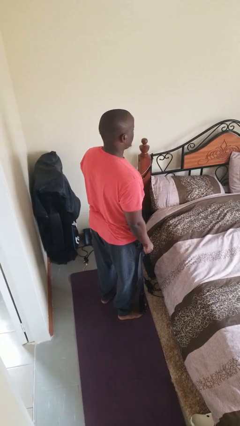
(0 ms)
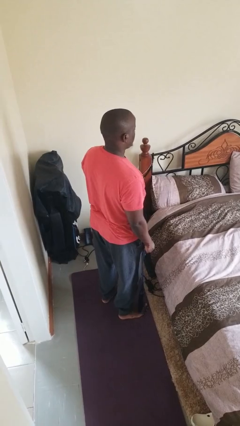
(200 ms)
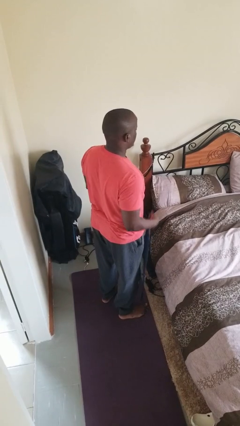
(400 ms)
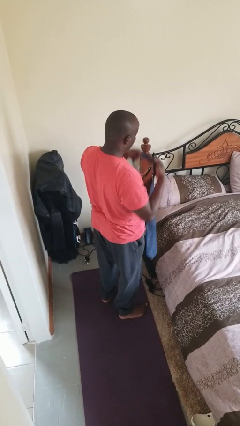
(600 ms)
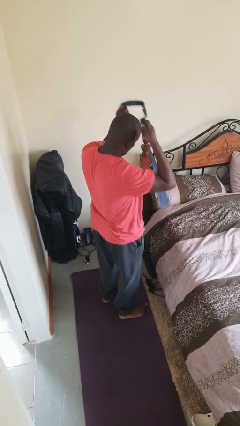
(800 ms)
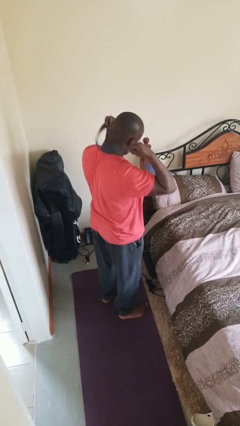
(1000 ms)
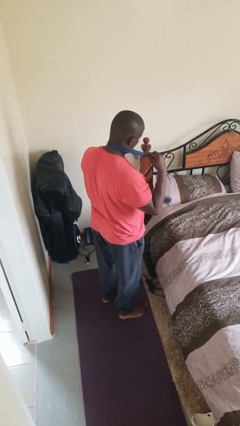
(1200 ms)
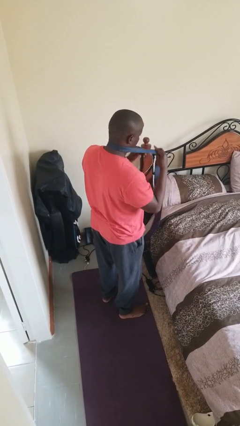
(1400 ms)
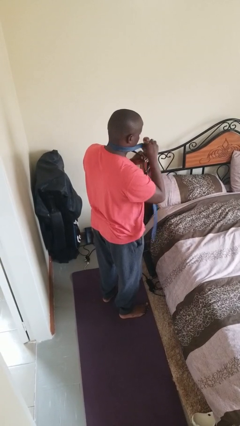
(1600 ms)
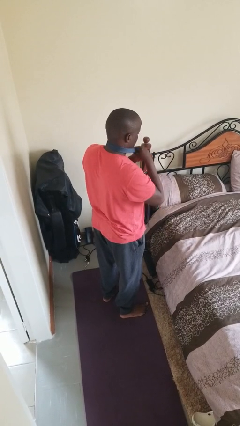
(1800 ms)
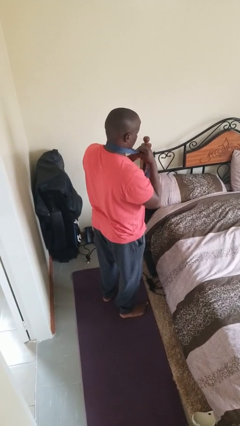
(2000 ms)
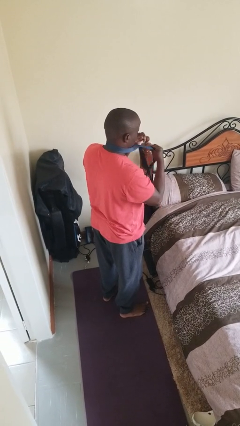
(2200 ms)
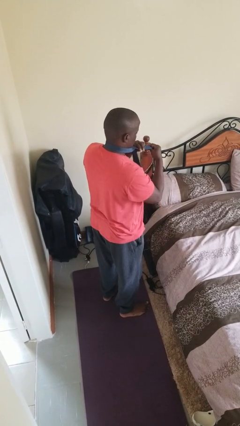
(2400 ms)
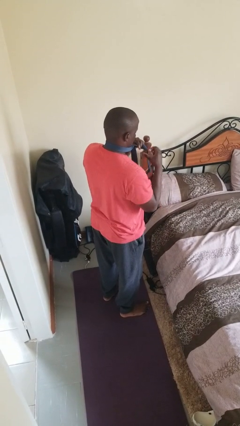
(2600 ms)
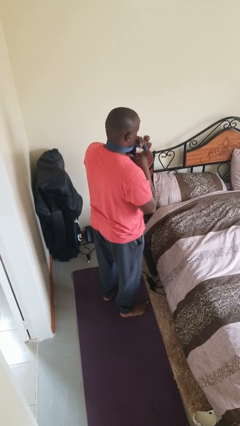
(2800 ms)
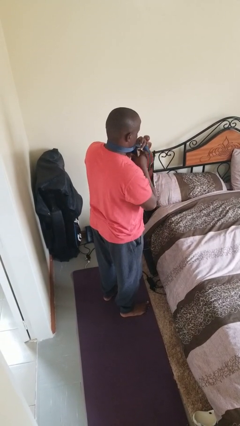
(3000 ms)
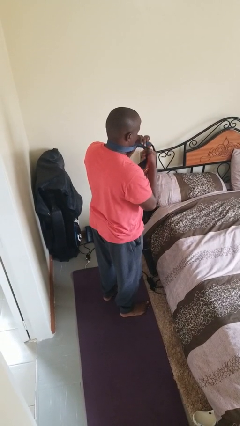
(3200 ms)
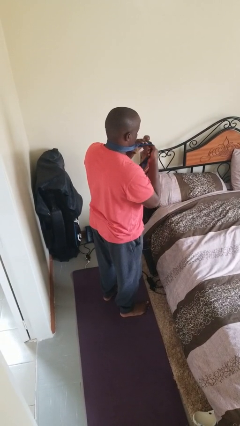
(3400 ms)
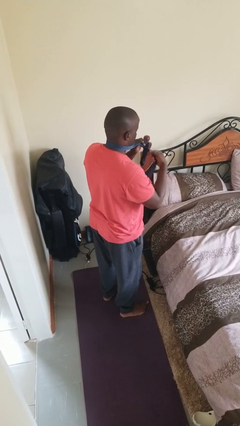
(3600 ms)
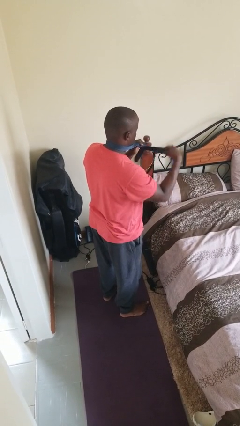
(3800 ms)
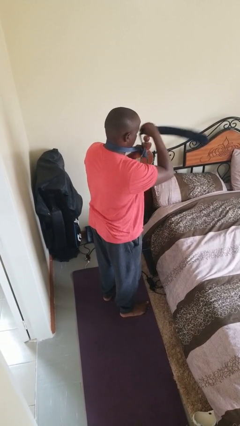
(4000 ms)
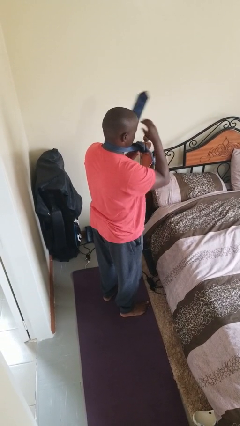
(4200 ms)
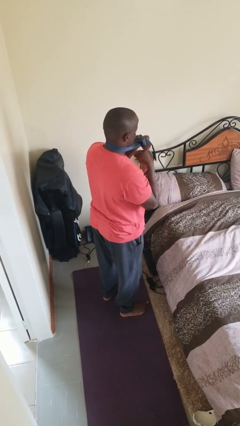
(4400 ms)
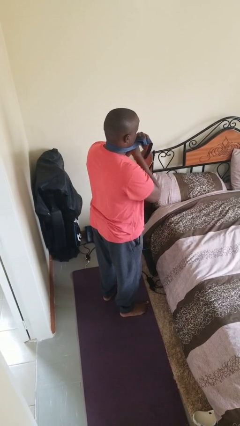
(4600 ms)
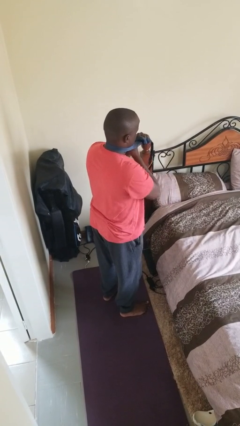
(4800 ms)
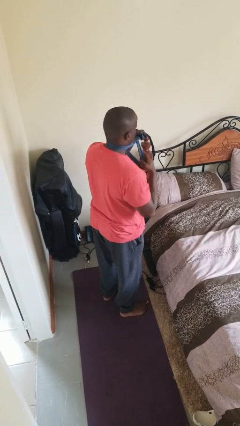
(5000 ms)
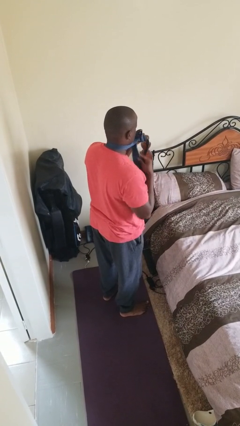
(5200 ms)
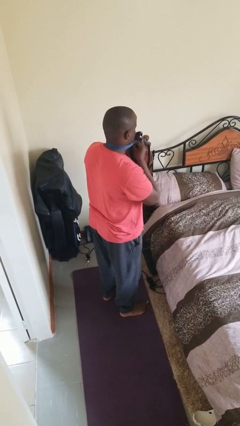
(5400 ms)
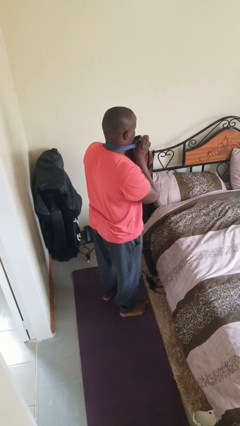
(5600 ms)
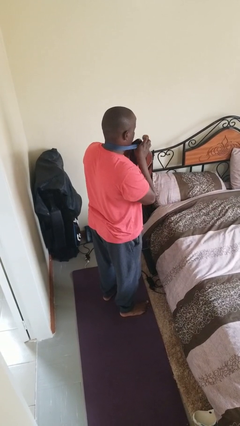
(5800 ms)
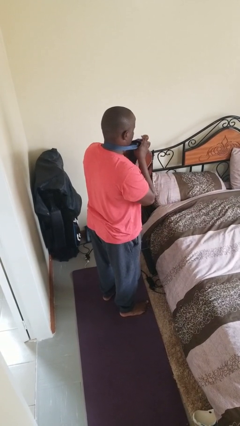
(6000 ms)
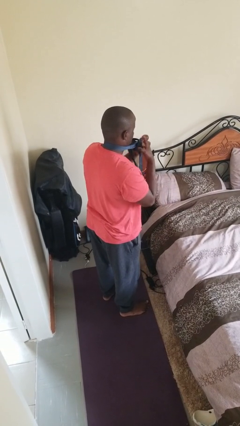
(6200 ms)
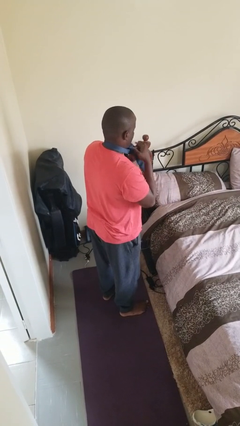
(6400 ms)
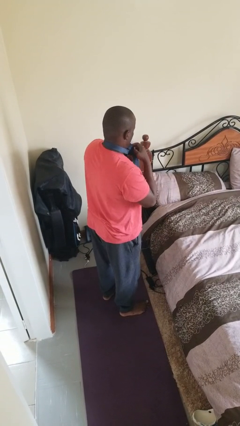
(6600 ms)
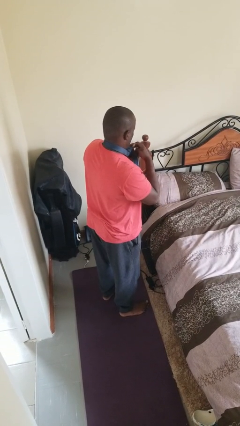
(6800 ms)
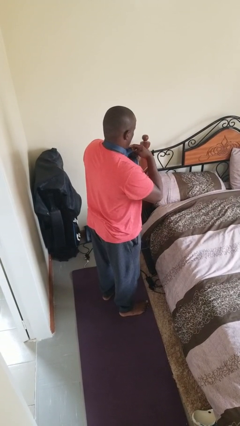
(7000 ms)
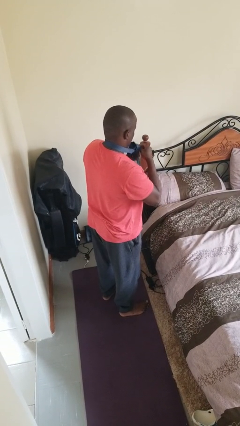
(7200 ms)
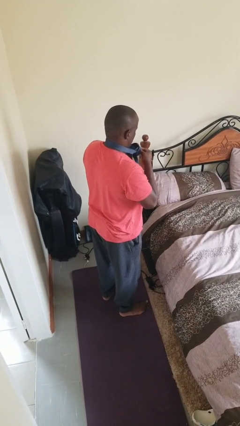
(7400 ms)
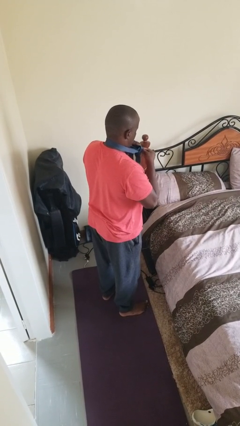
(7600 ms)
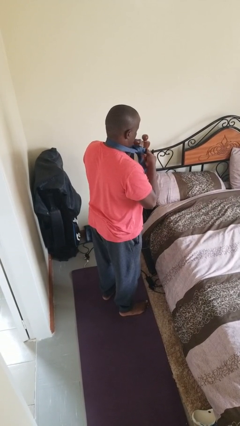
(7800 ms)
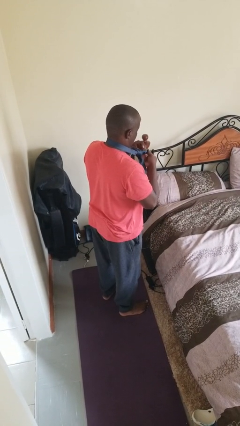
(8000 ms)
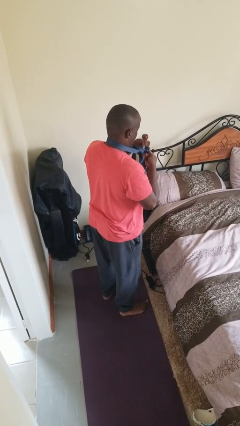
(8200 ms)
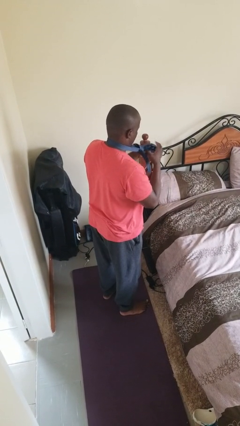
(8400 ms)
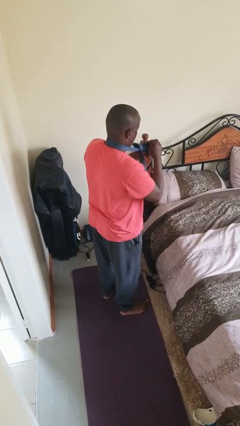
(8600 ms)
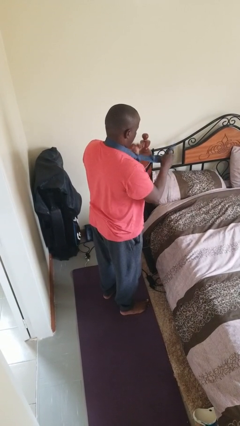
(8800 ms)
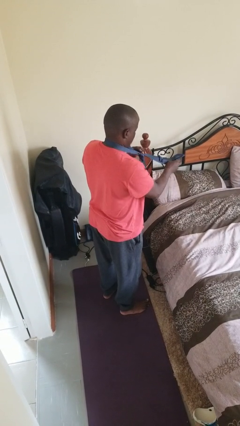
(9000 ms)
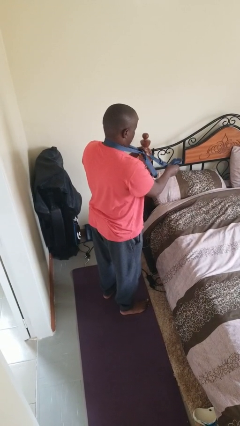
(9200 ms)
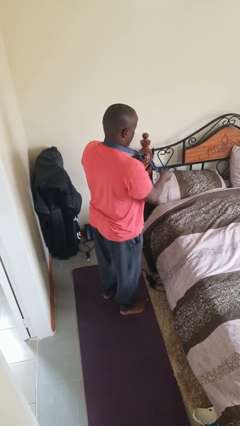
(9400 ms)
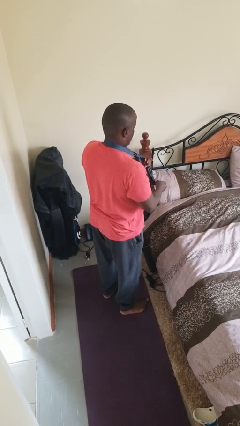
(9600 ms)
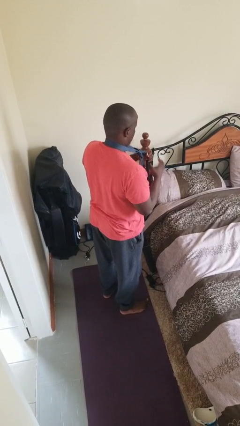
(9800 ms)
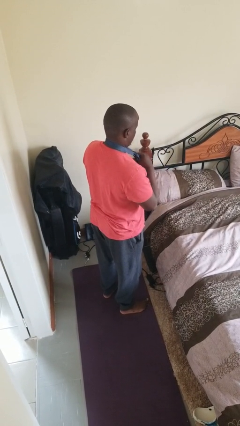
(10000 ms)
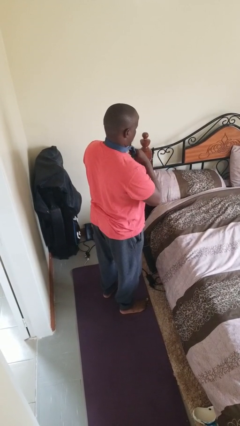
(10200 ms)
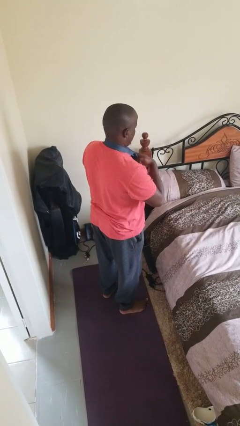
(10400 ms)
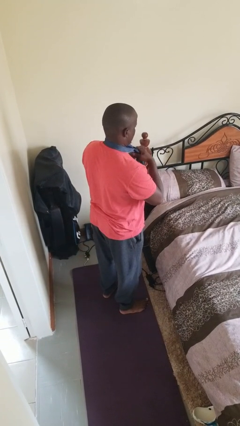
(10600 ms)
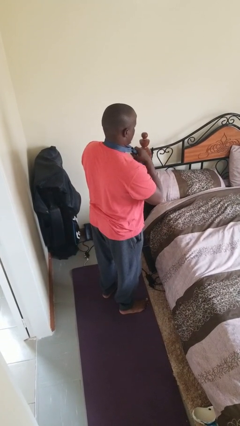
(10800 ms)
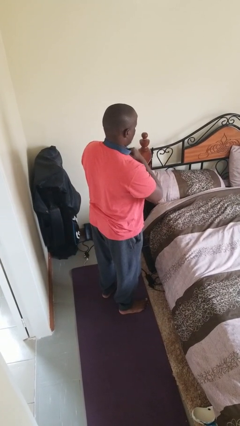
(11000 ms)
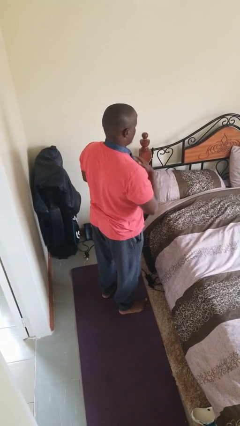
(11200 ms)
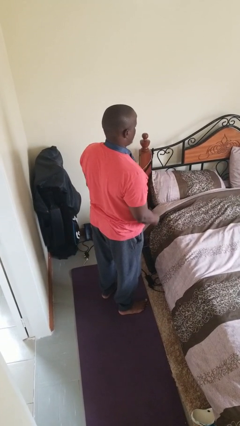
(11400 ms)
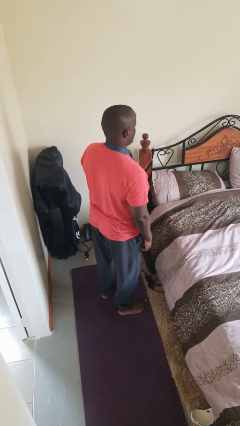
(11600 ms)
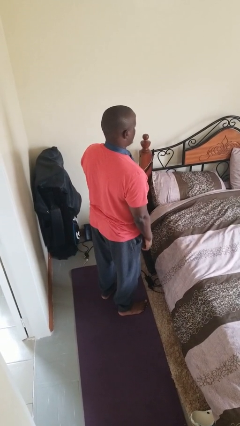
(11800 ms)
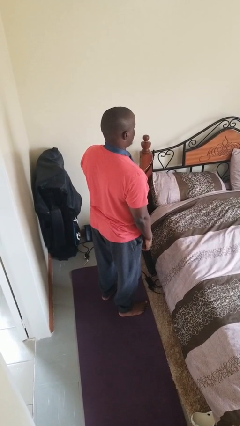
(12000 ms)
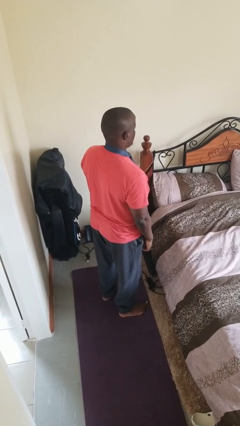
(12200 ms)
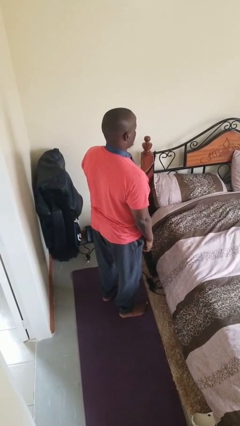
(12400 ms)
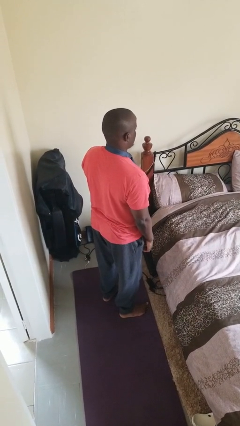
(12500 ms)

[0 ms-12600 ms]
person puts on necktie

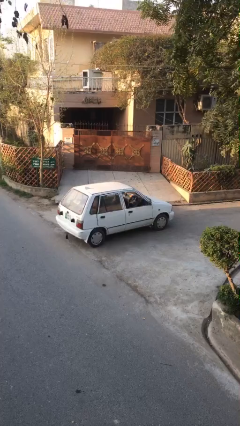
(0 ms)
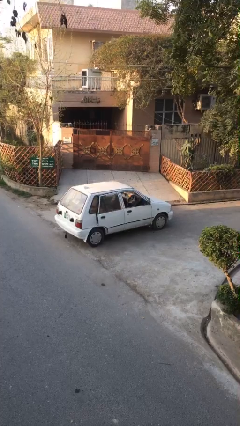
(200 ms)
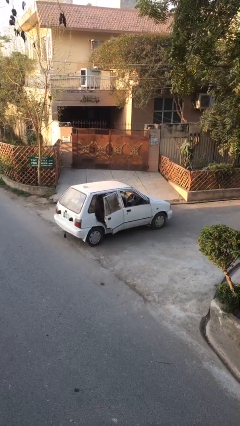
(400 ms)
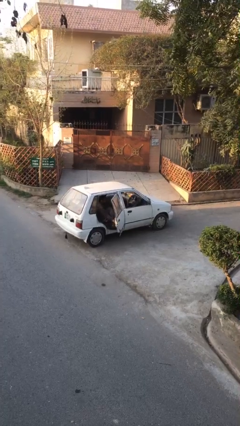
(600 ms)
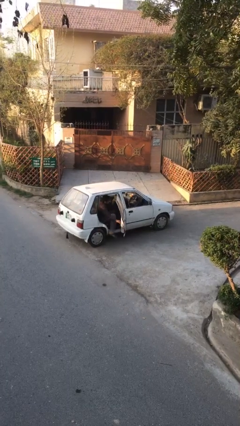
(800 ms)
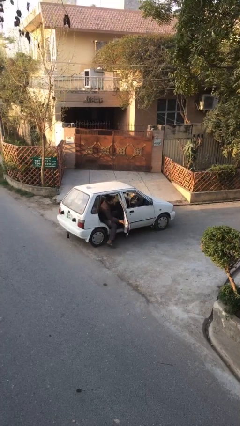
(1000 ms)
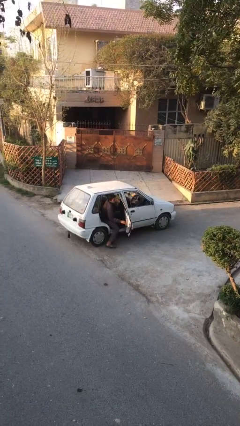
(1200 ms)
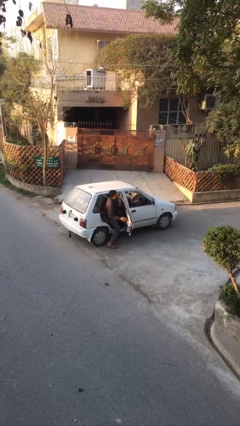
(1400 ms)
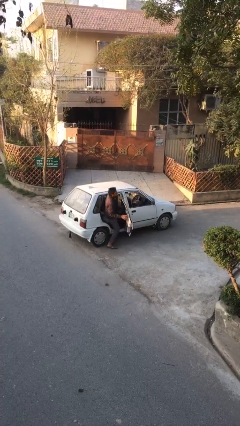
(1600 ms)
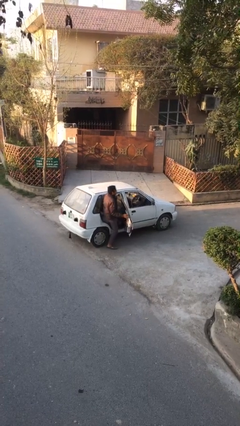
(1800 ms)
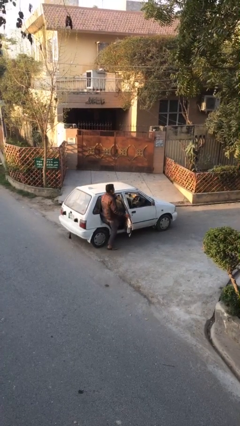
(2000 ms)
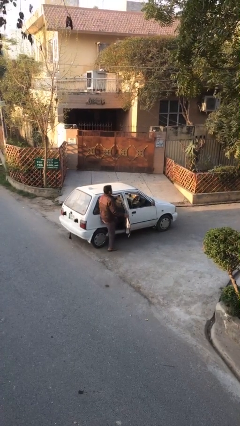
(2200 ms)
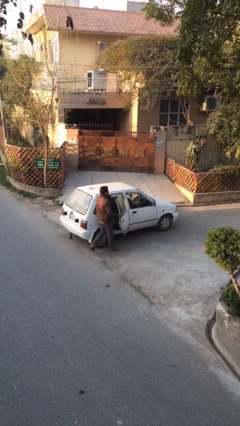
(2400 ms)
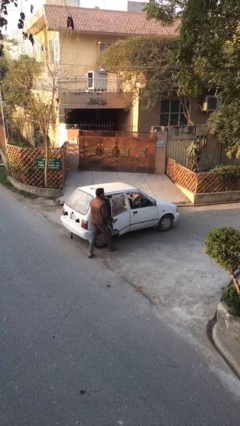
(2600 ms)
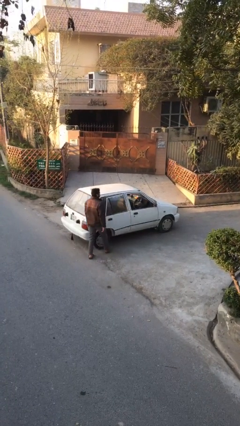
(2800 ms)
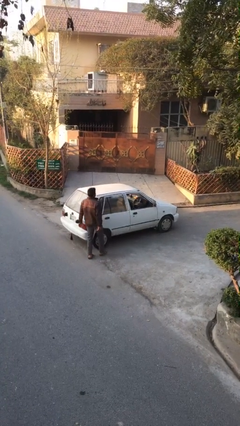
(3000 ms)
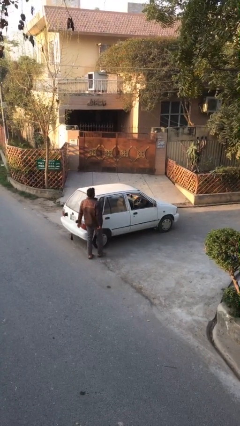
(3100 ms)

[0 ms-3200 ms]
car drops off person

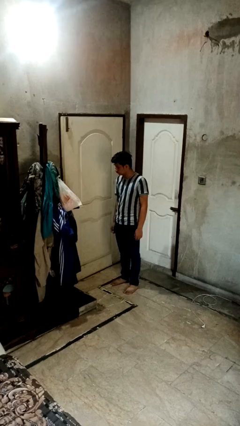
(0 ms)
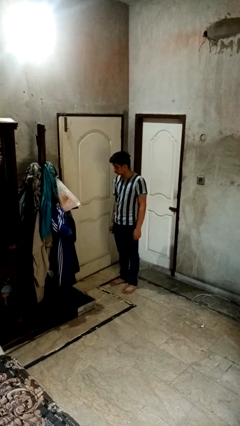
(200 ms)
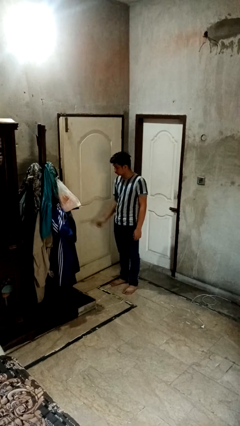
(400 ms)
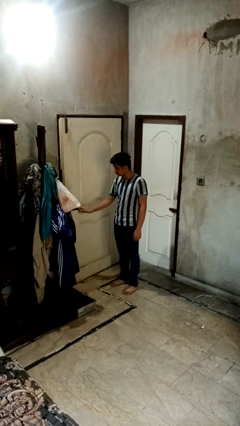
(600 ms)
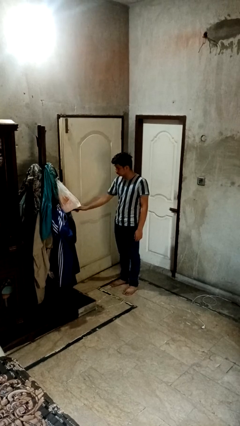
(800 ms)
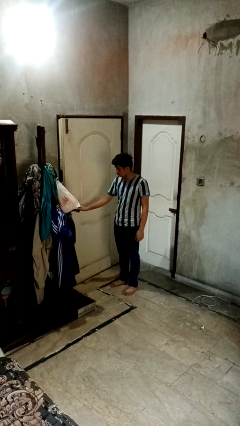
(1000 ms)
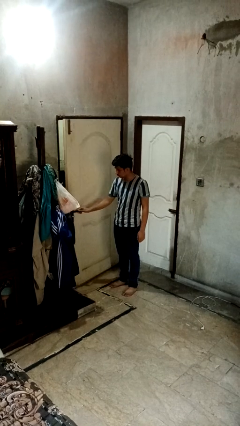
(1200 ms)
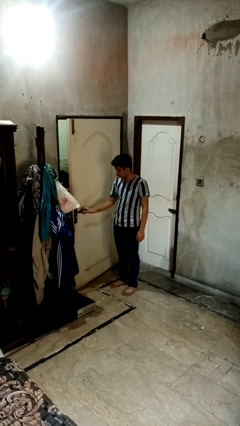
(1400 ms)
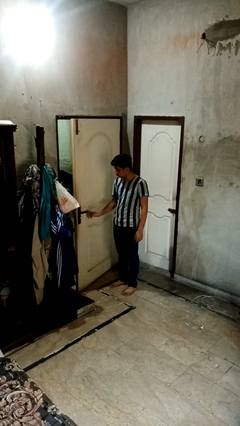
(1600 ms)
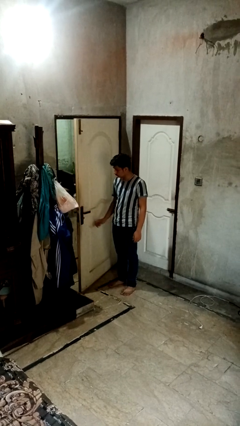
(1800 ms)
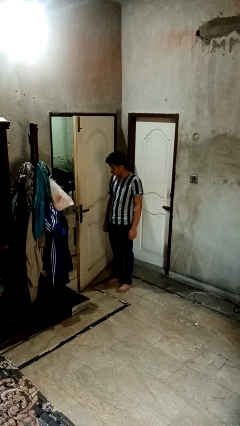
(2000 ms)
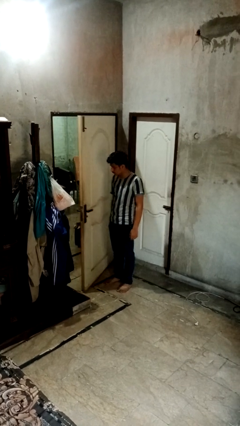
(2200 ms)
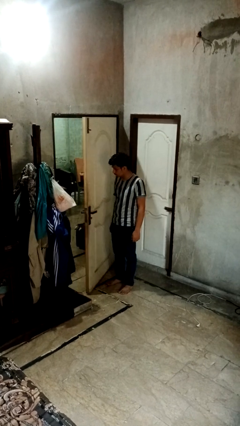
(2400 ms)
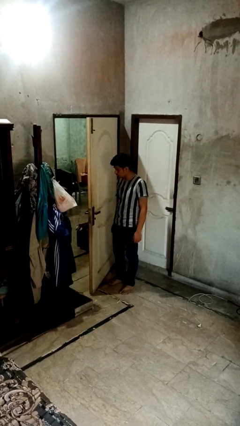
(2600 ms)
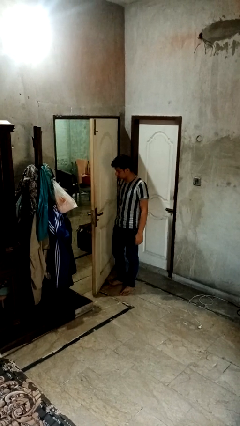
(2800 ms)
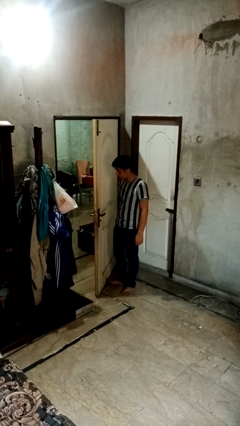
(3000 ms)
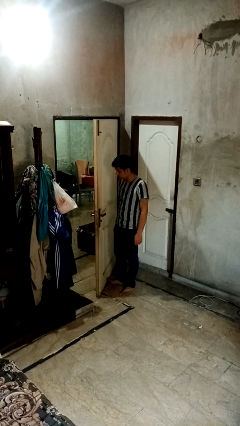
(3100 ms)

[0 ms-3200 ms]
person opens facility door
